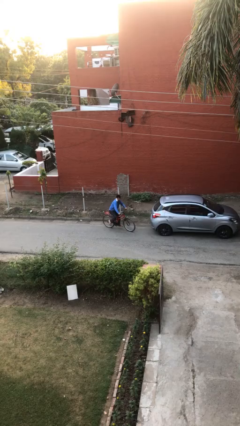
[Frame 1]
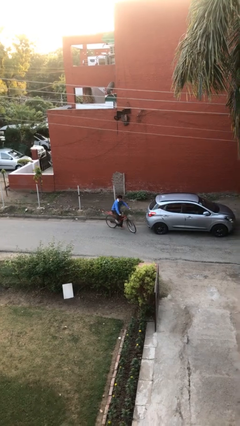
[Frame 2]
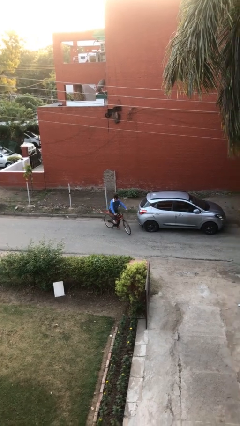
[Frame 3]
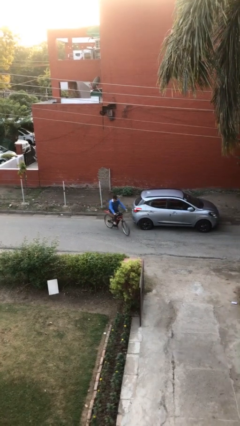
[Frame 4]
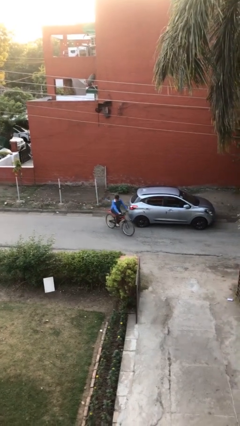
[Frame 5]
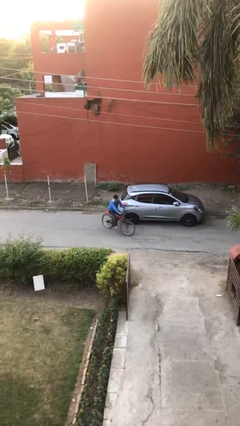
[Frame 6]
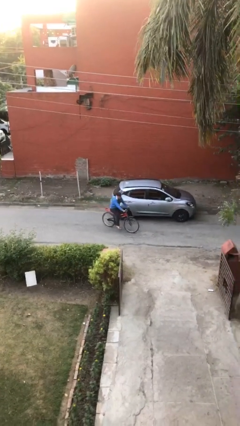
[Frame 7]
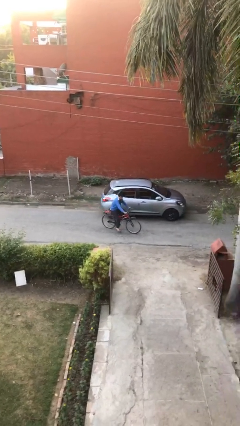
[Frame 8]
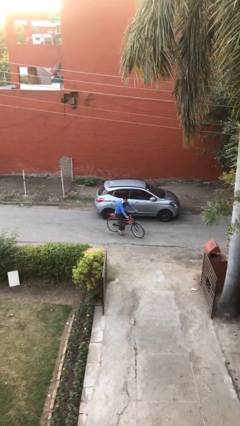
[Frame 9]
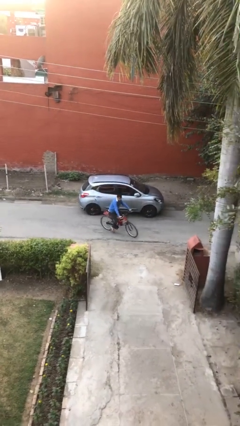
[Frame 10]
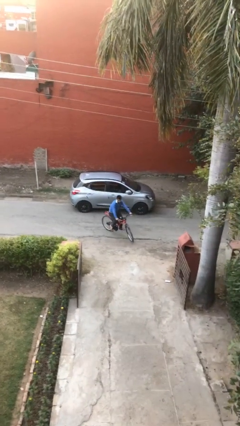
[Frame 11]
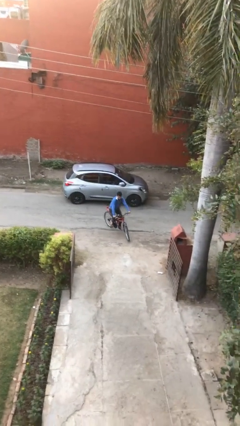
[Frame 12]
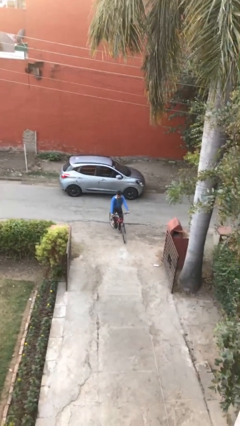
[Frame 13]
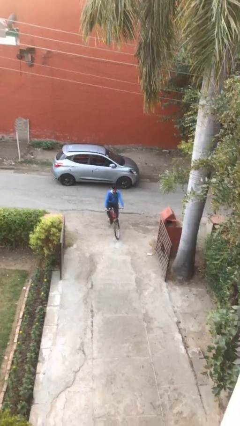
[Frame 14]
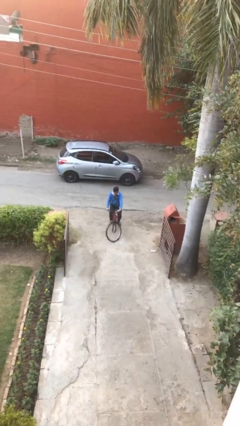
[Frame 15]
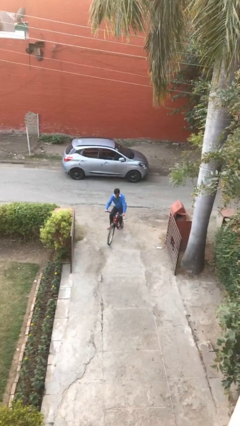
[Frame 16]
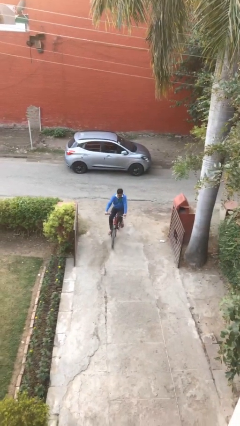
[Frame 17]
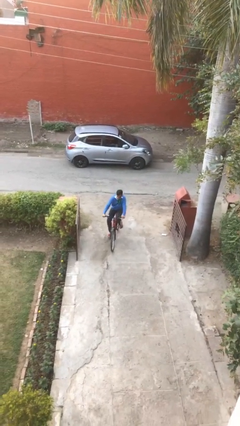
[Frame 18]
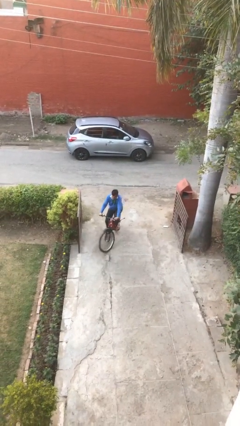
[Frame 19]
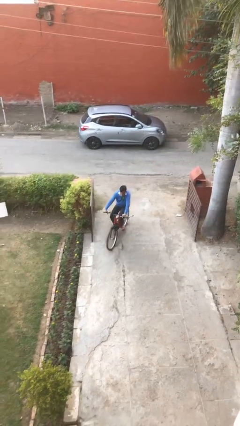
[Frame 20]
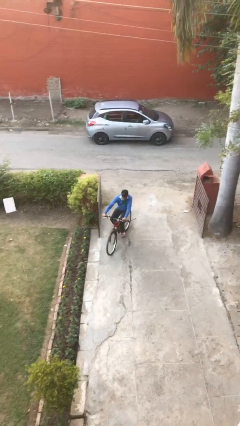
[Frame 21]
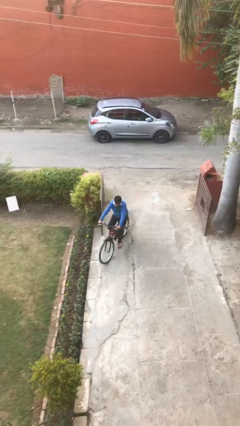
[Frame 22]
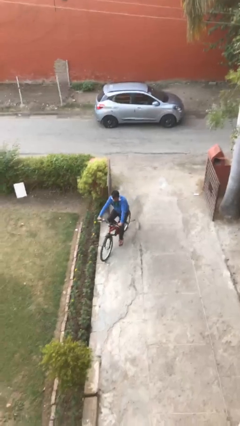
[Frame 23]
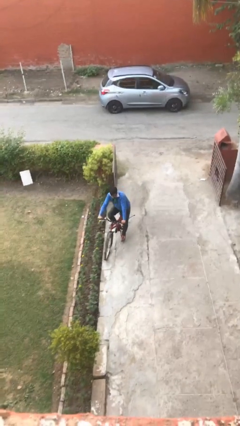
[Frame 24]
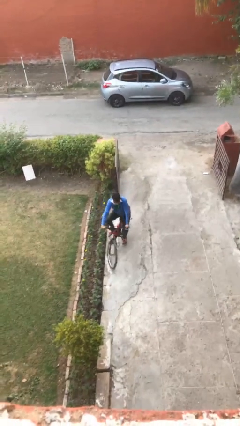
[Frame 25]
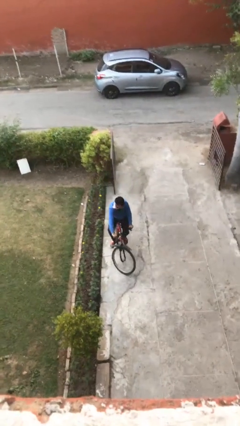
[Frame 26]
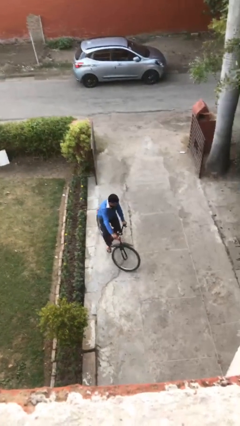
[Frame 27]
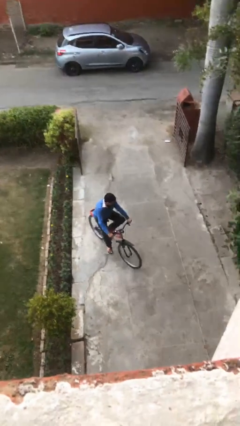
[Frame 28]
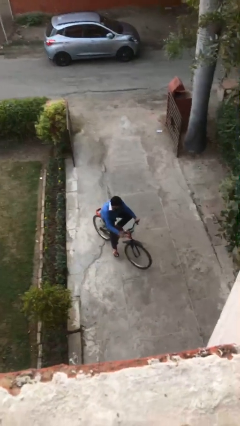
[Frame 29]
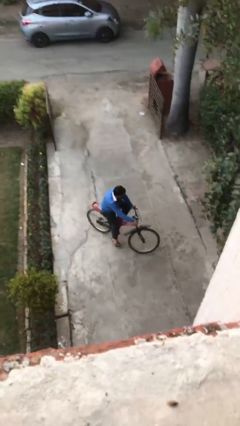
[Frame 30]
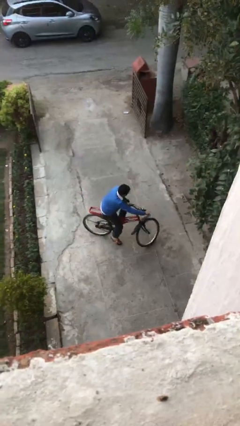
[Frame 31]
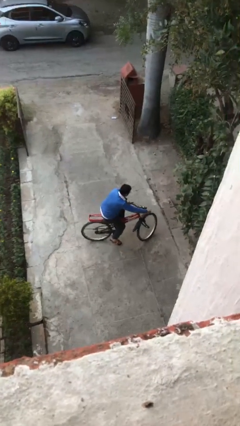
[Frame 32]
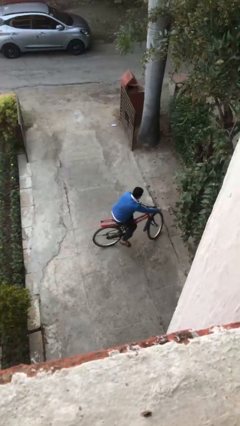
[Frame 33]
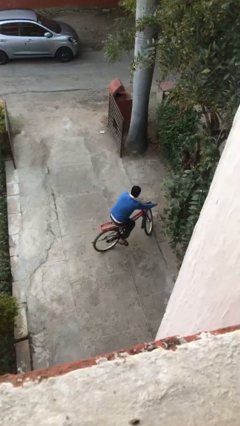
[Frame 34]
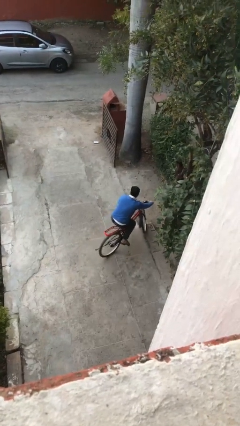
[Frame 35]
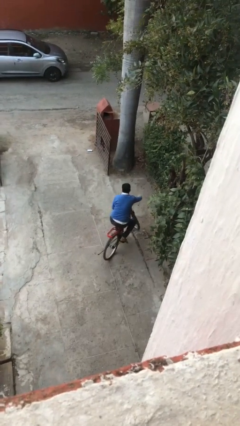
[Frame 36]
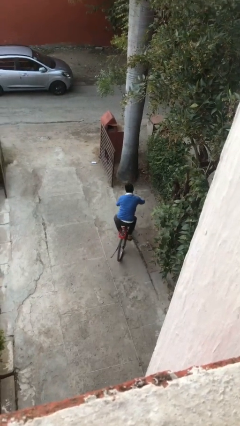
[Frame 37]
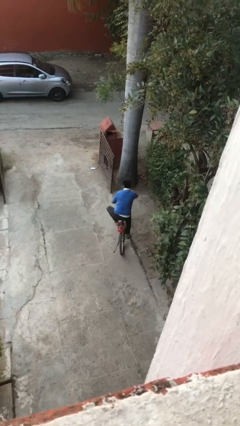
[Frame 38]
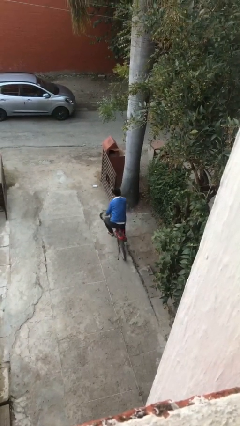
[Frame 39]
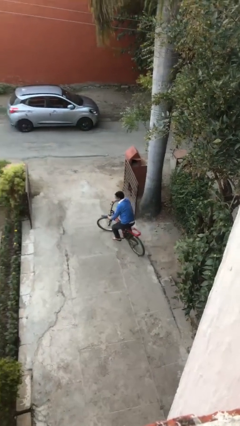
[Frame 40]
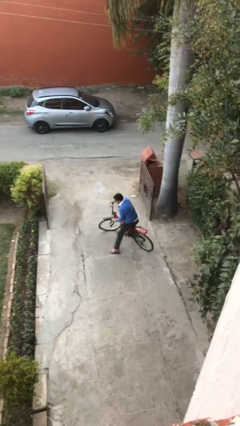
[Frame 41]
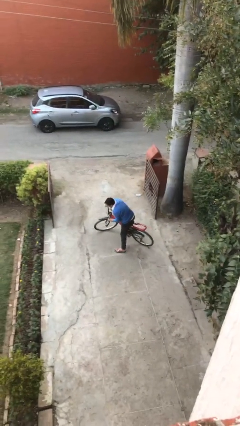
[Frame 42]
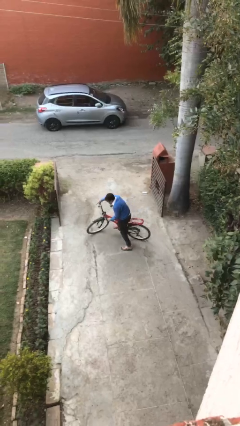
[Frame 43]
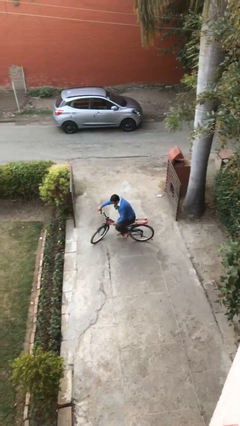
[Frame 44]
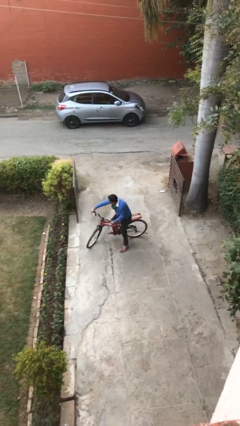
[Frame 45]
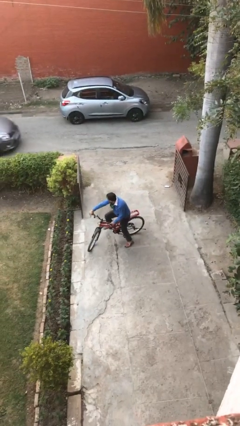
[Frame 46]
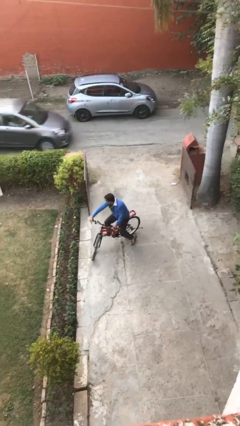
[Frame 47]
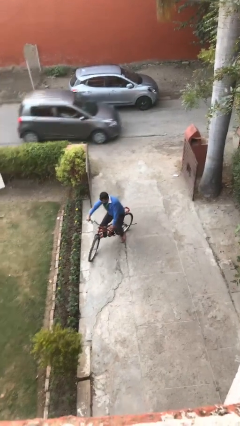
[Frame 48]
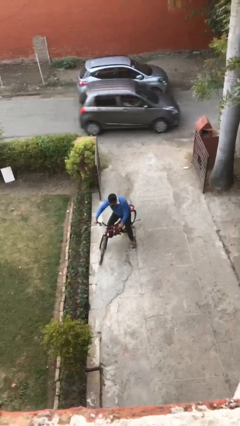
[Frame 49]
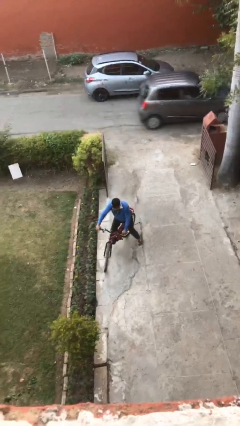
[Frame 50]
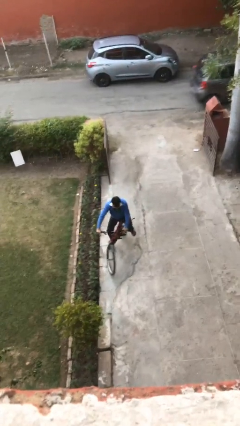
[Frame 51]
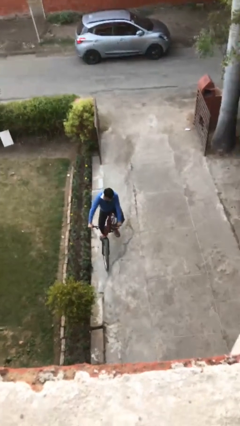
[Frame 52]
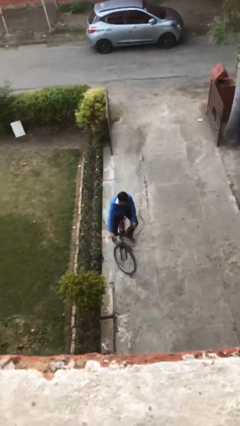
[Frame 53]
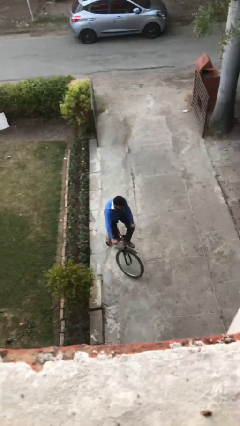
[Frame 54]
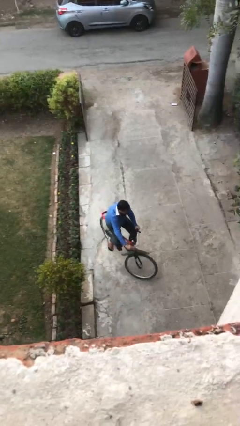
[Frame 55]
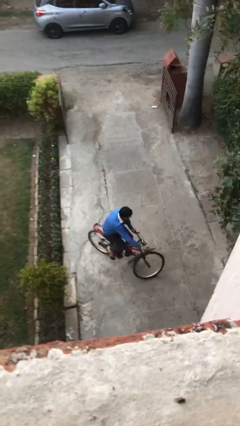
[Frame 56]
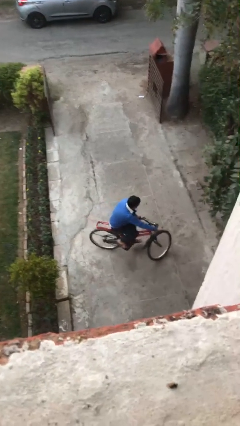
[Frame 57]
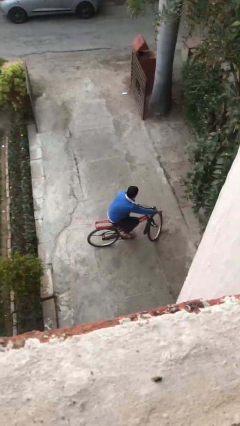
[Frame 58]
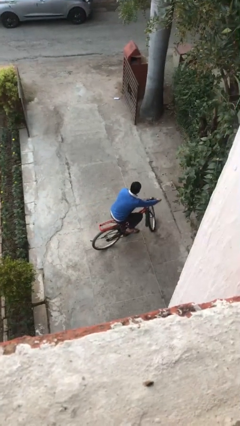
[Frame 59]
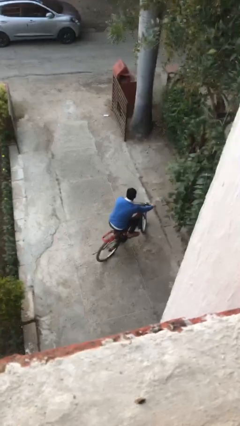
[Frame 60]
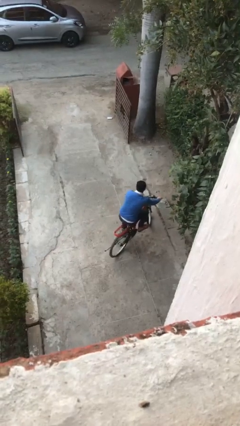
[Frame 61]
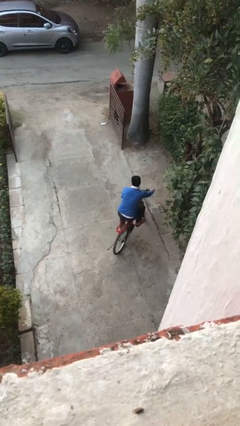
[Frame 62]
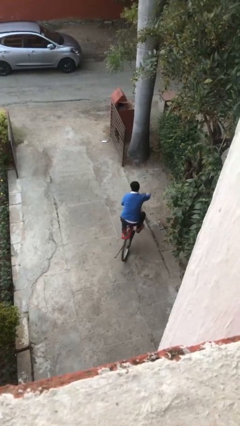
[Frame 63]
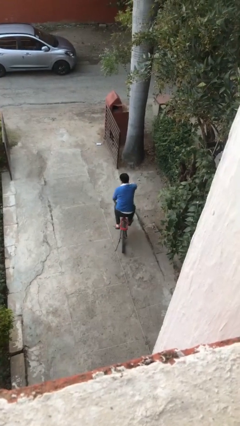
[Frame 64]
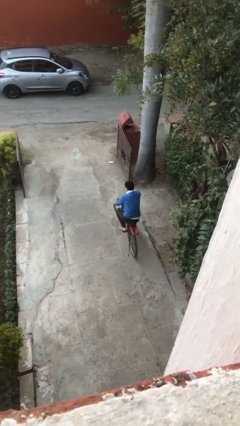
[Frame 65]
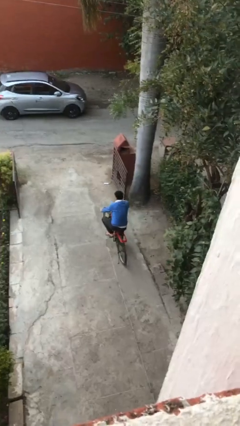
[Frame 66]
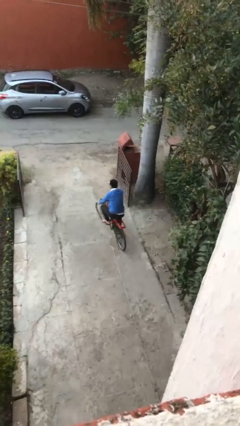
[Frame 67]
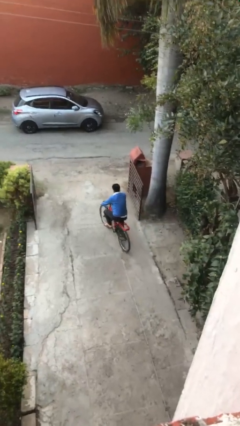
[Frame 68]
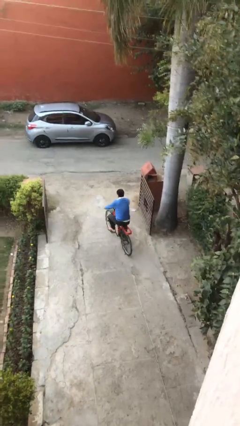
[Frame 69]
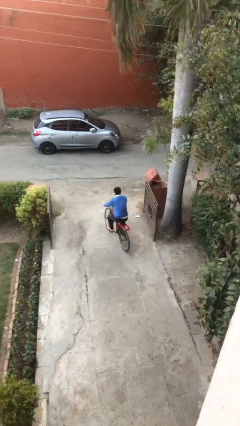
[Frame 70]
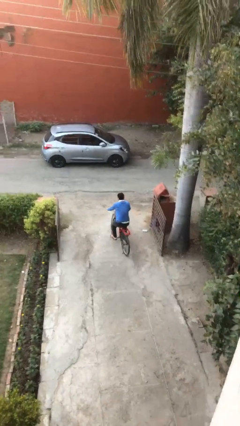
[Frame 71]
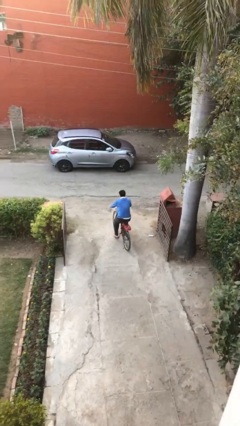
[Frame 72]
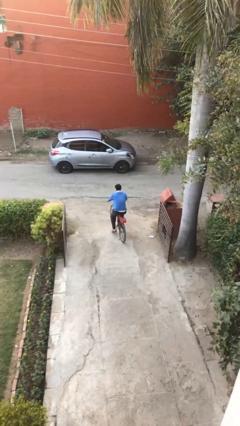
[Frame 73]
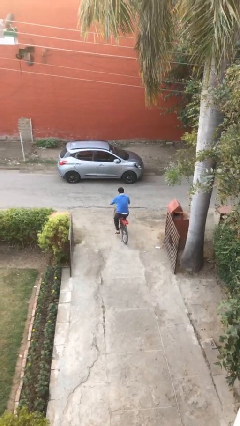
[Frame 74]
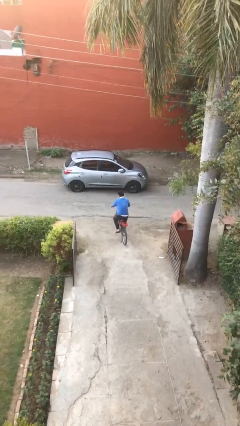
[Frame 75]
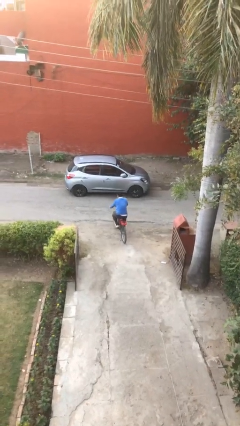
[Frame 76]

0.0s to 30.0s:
person rides bicycle

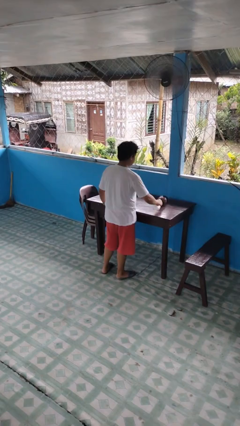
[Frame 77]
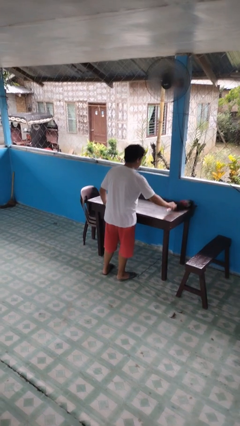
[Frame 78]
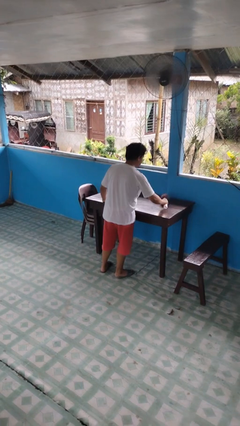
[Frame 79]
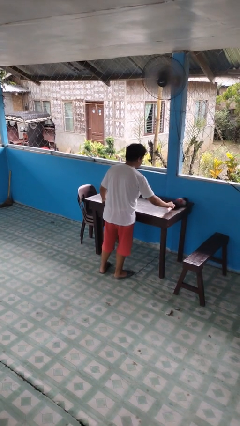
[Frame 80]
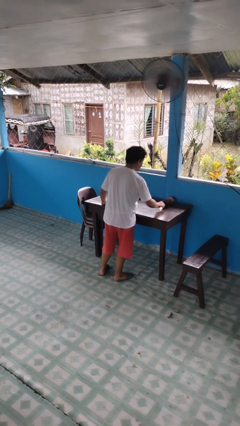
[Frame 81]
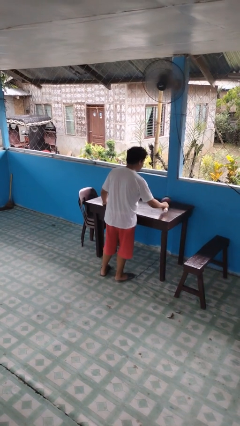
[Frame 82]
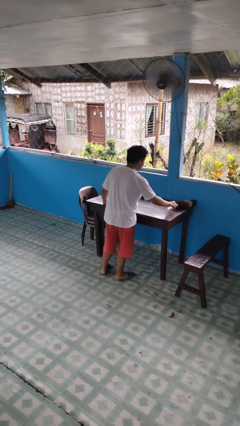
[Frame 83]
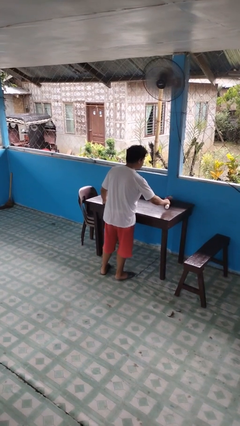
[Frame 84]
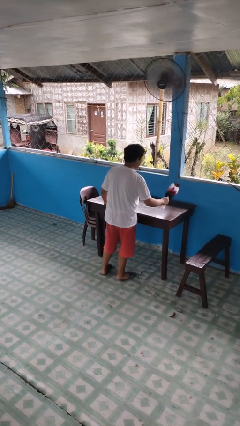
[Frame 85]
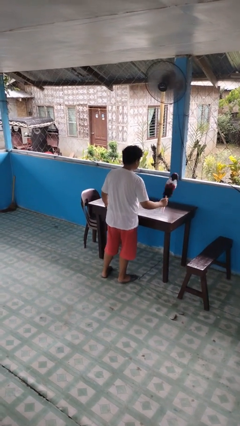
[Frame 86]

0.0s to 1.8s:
person dusts furniture

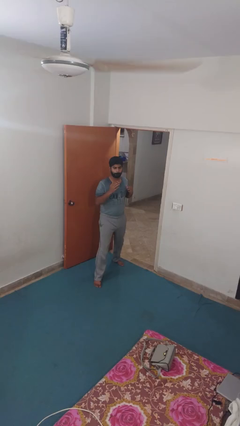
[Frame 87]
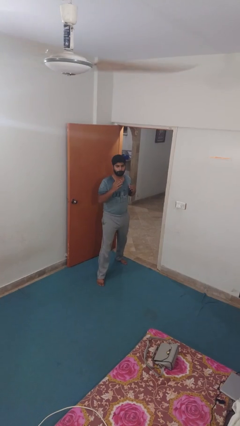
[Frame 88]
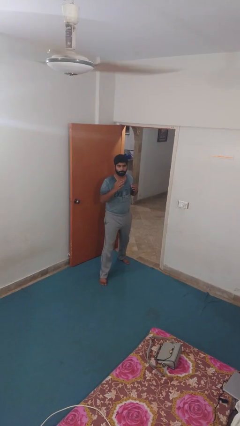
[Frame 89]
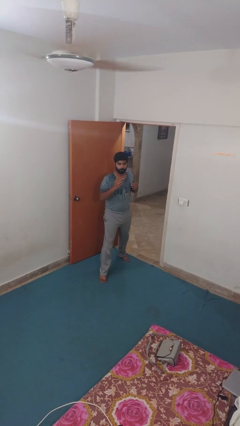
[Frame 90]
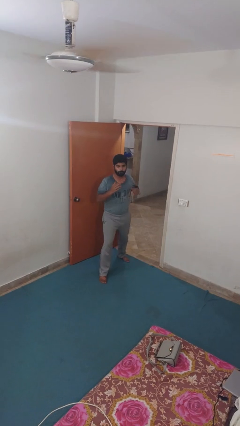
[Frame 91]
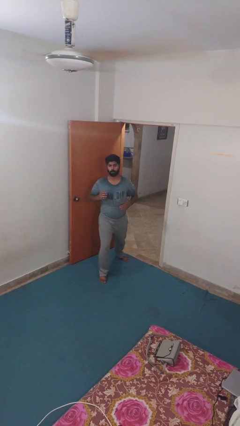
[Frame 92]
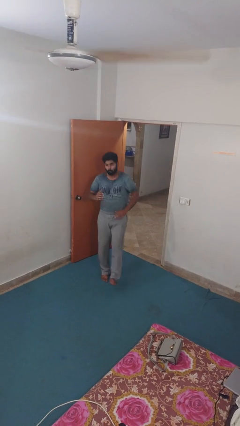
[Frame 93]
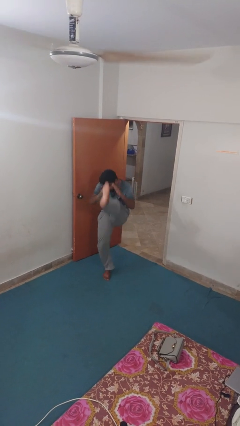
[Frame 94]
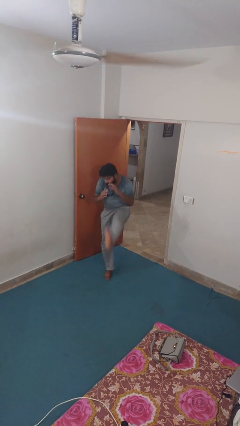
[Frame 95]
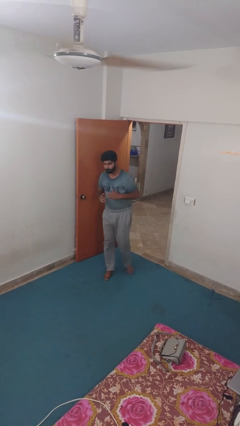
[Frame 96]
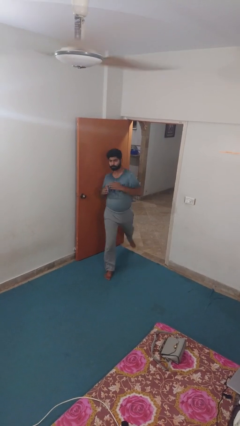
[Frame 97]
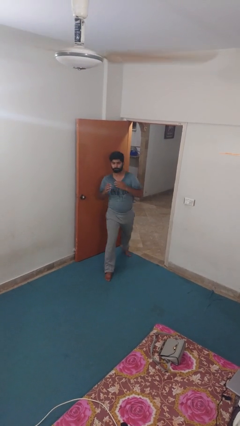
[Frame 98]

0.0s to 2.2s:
person karate kicks
